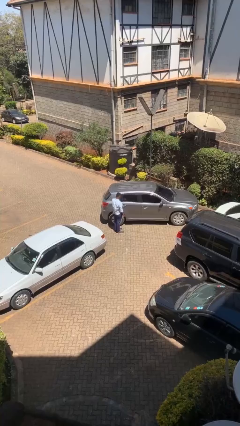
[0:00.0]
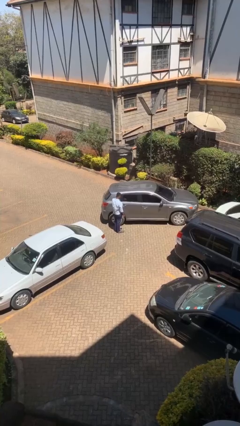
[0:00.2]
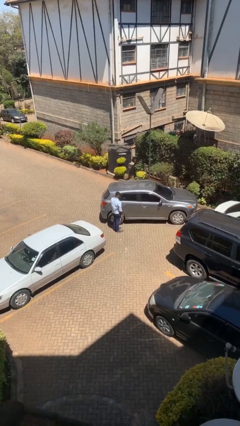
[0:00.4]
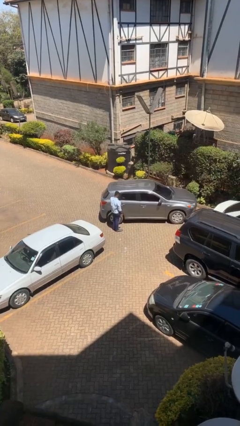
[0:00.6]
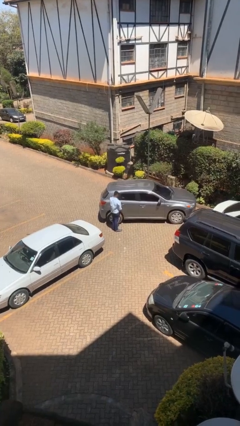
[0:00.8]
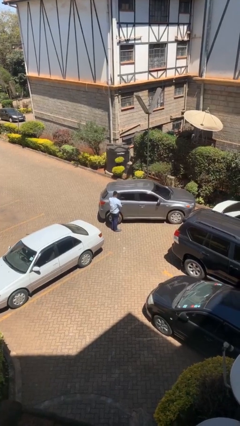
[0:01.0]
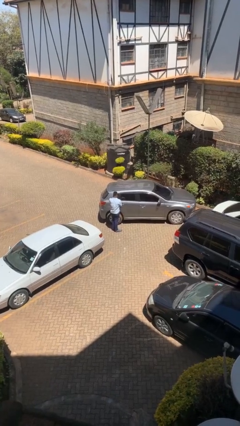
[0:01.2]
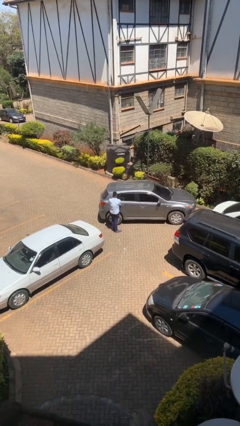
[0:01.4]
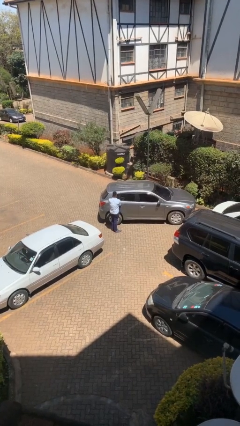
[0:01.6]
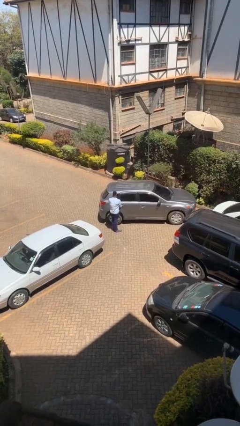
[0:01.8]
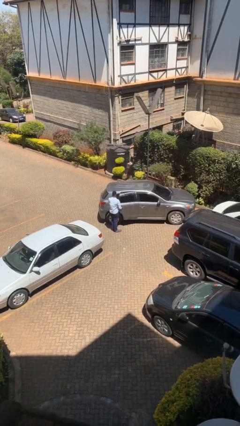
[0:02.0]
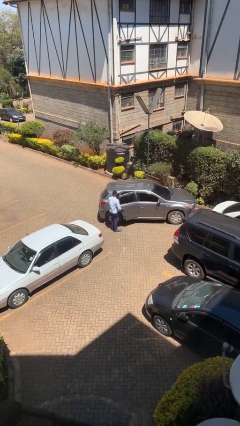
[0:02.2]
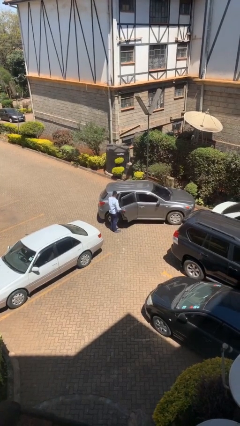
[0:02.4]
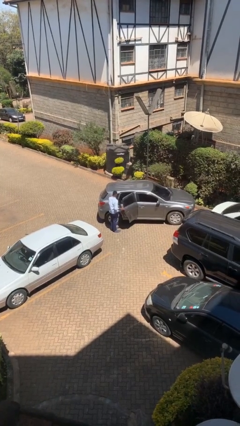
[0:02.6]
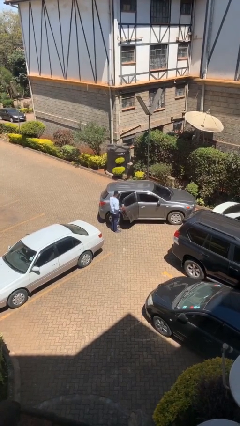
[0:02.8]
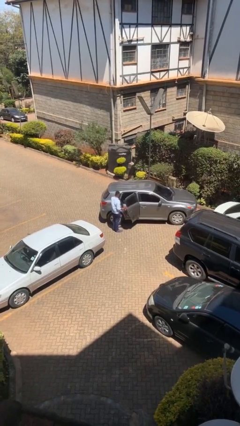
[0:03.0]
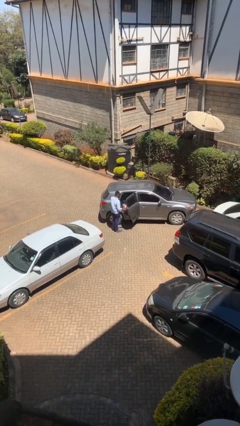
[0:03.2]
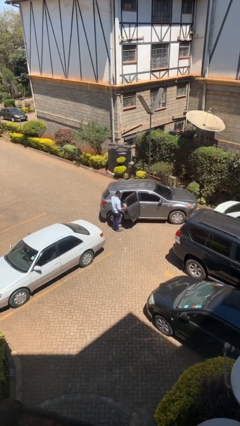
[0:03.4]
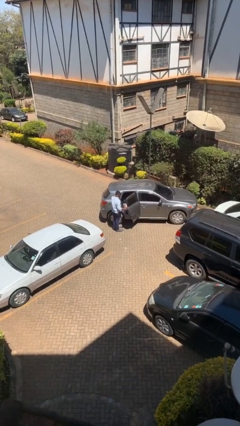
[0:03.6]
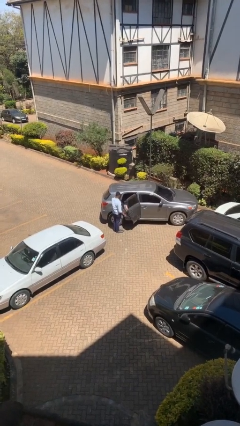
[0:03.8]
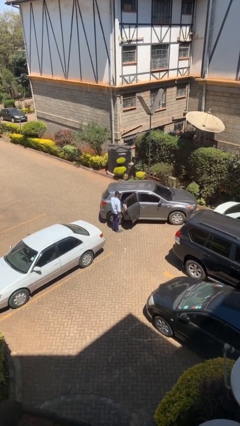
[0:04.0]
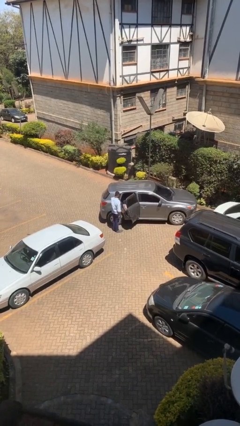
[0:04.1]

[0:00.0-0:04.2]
person opens car door

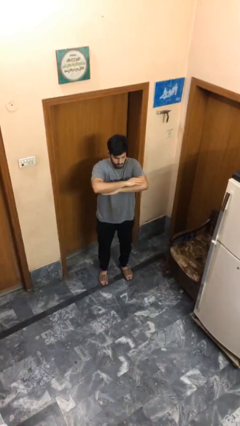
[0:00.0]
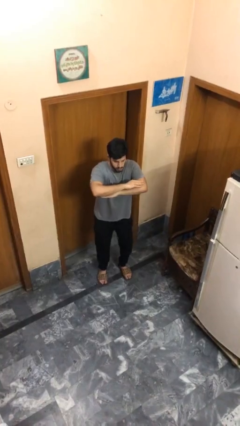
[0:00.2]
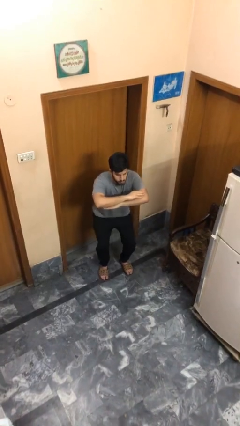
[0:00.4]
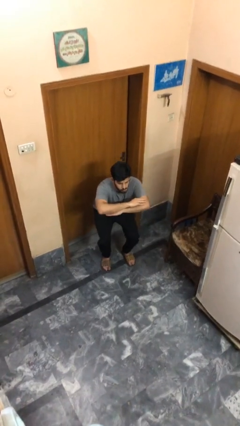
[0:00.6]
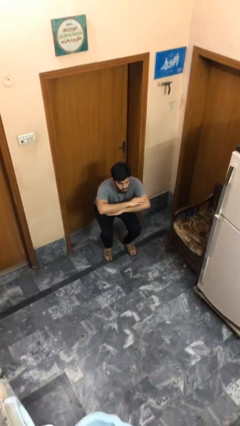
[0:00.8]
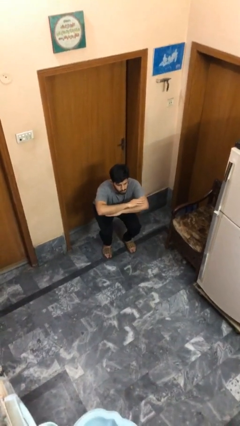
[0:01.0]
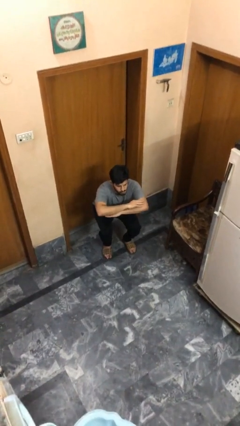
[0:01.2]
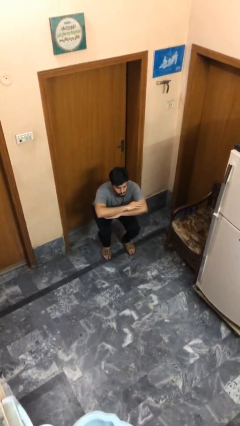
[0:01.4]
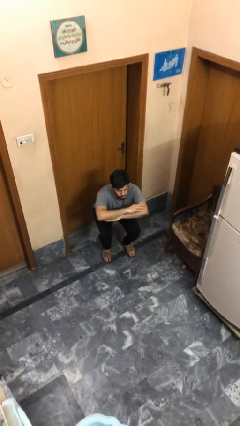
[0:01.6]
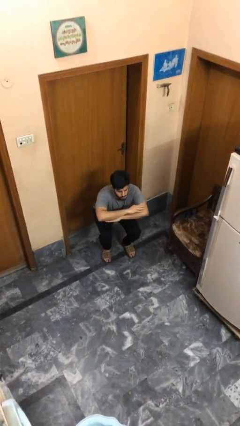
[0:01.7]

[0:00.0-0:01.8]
person squats

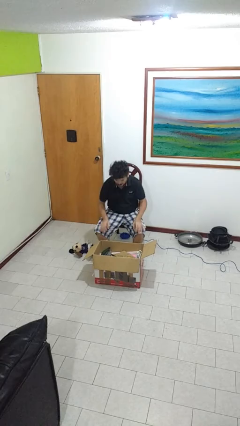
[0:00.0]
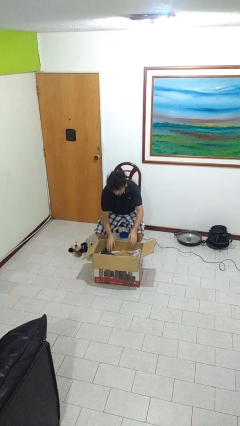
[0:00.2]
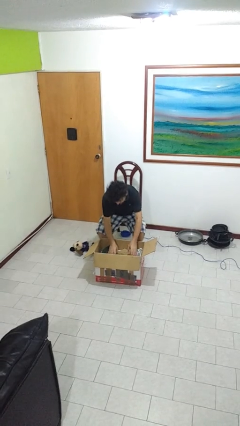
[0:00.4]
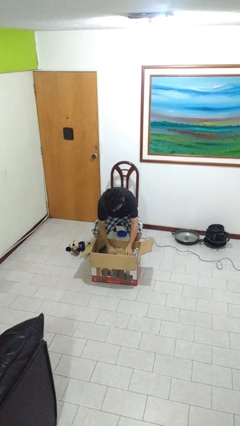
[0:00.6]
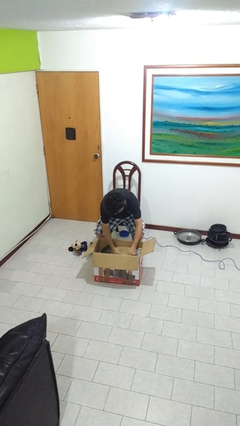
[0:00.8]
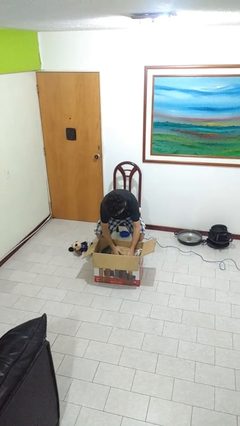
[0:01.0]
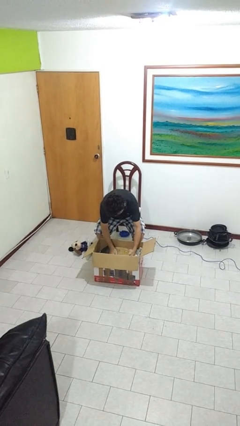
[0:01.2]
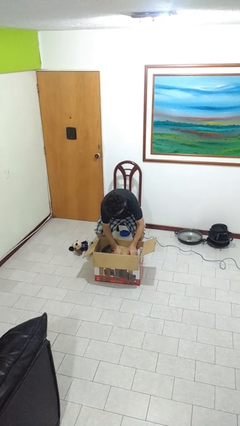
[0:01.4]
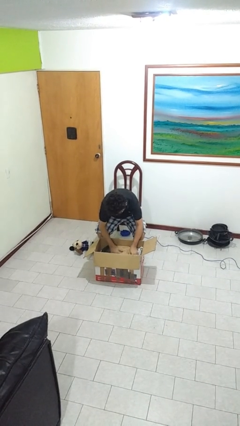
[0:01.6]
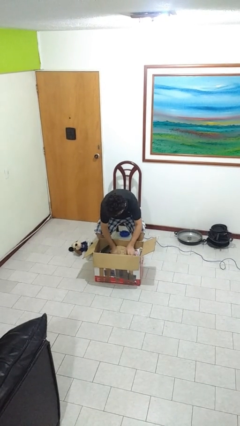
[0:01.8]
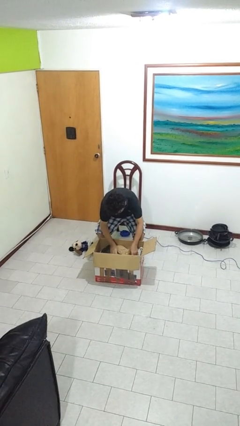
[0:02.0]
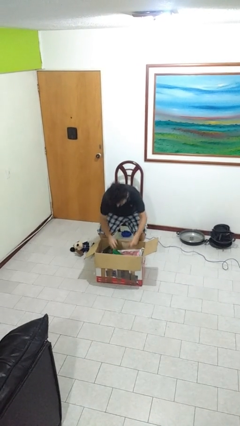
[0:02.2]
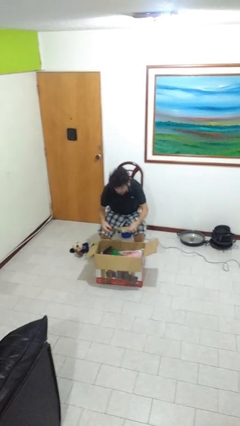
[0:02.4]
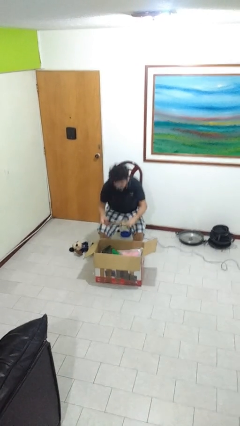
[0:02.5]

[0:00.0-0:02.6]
person searches in box

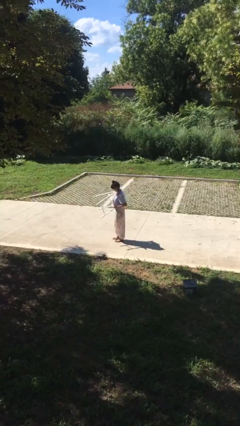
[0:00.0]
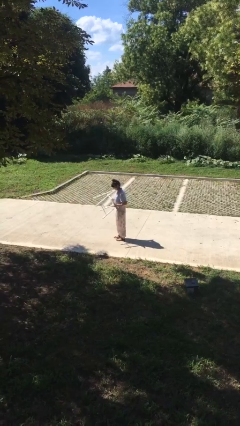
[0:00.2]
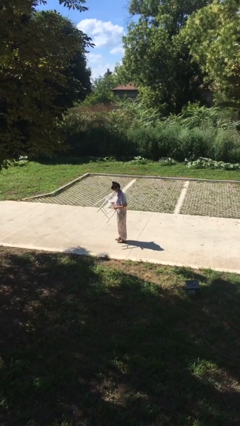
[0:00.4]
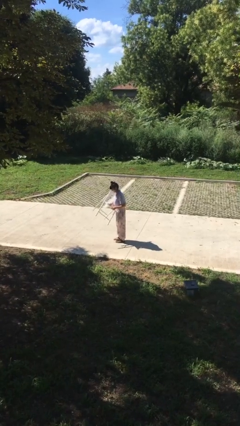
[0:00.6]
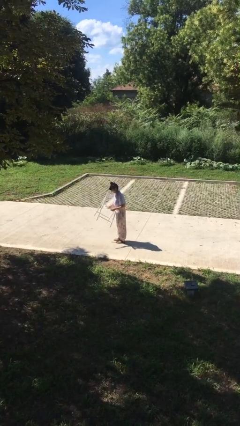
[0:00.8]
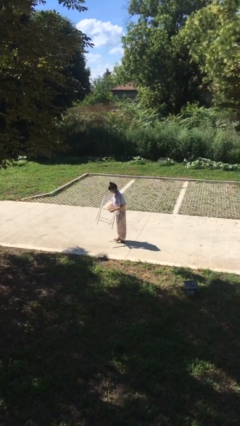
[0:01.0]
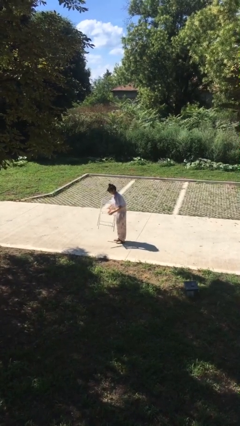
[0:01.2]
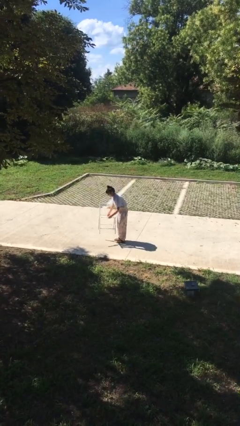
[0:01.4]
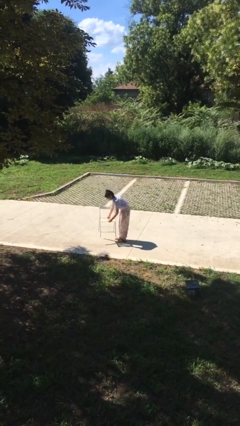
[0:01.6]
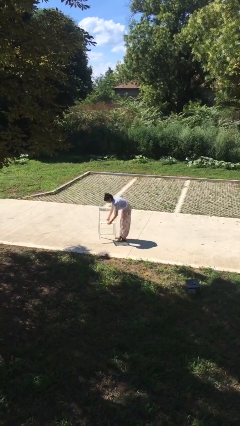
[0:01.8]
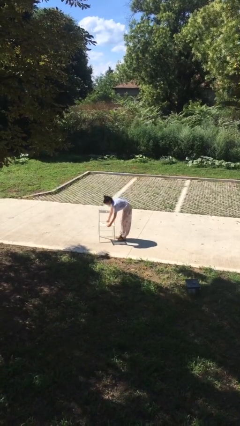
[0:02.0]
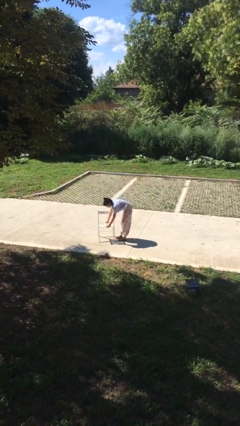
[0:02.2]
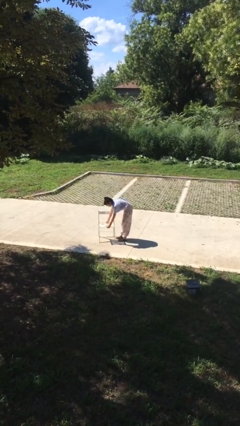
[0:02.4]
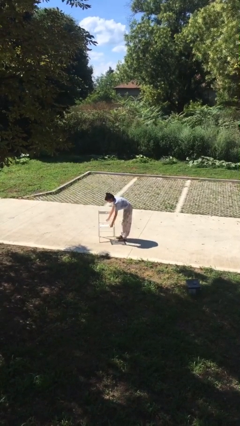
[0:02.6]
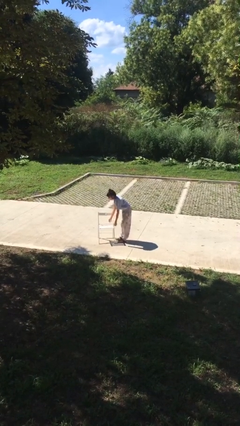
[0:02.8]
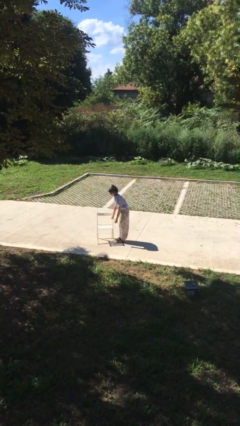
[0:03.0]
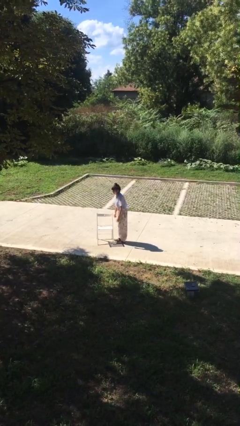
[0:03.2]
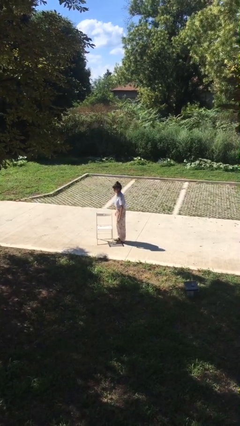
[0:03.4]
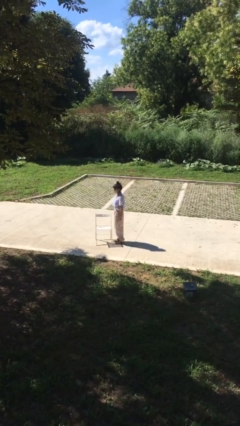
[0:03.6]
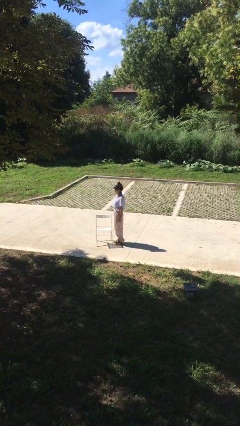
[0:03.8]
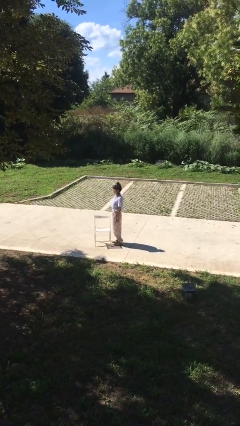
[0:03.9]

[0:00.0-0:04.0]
person puts down object on floor

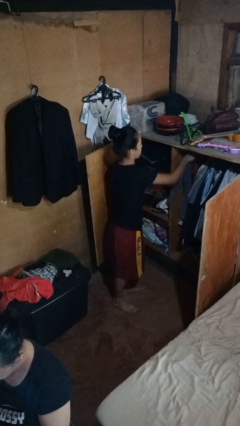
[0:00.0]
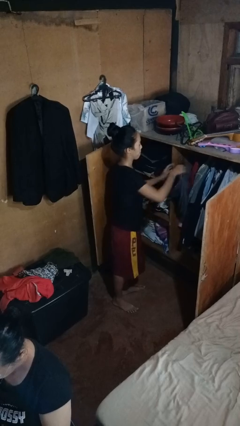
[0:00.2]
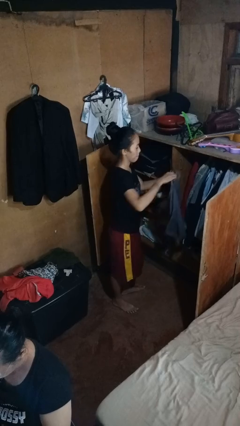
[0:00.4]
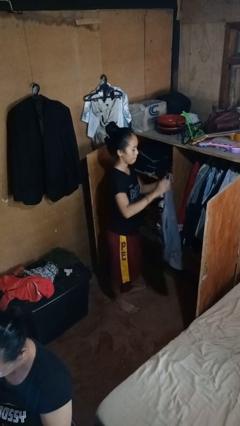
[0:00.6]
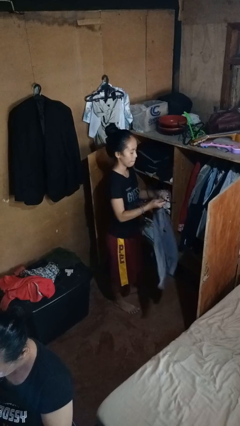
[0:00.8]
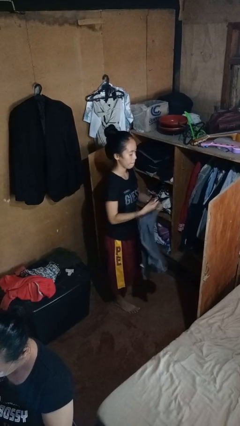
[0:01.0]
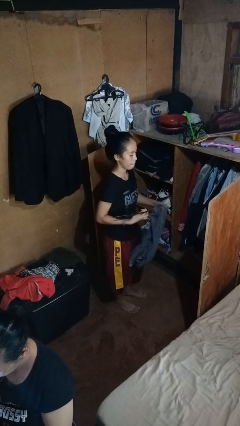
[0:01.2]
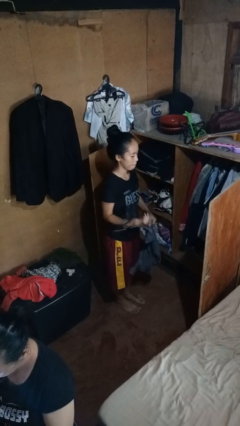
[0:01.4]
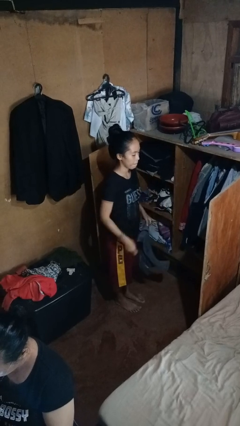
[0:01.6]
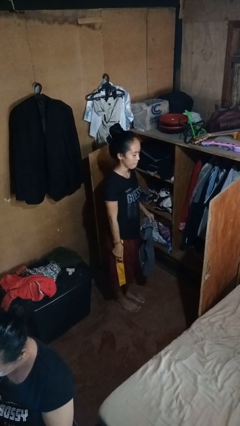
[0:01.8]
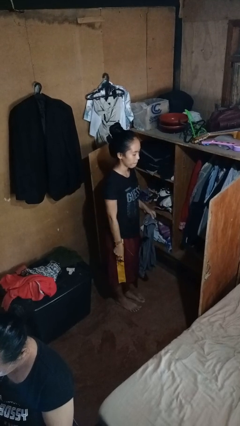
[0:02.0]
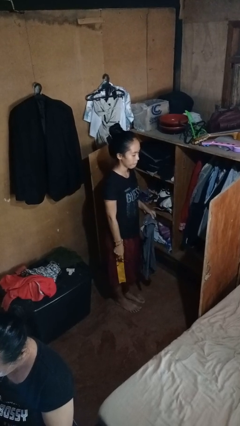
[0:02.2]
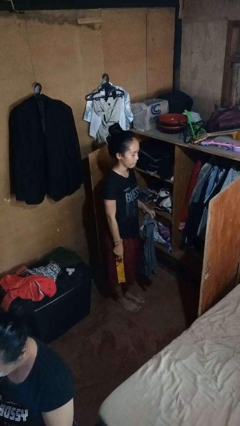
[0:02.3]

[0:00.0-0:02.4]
person takes clothes from closet

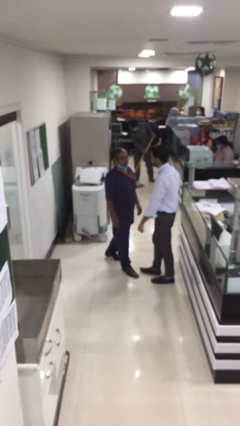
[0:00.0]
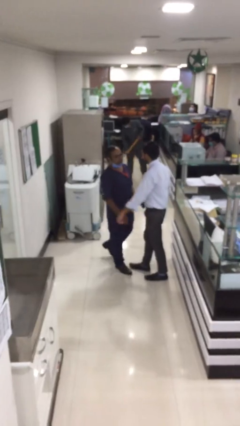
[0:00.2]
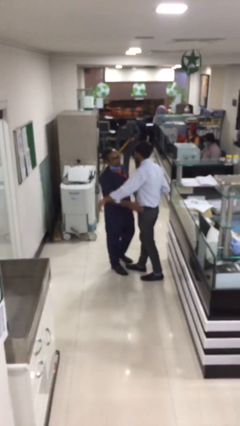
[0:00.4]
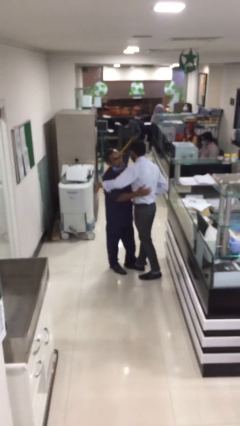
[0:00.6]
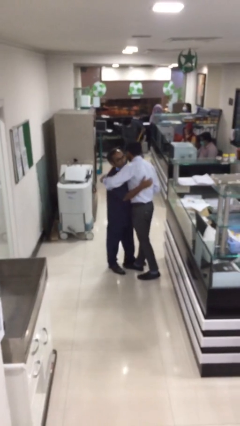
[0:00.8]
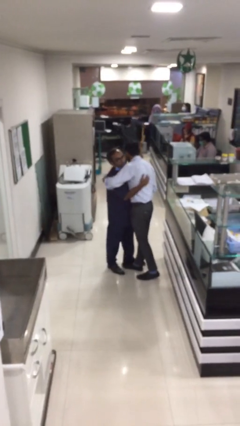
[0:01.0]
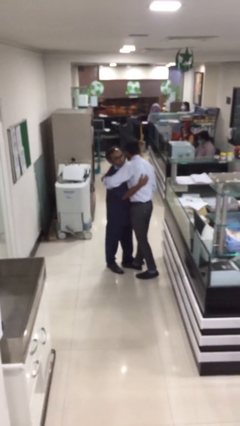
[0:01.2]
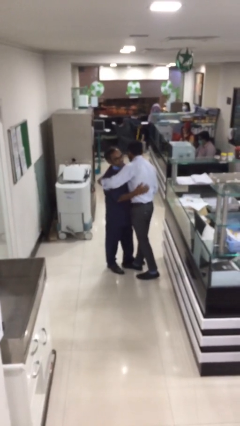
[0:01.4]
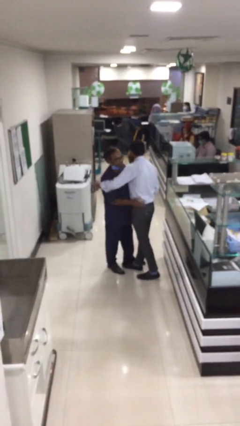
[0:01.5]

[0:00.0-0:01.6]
person embraces person

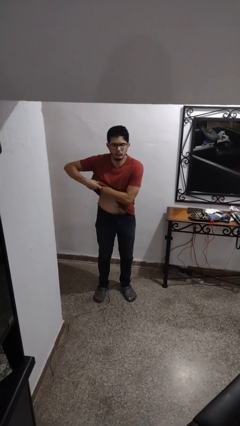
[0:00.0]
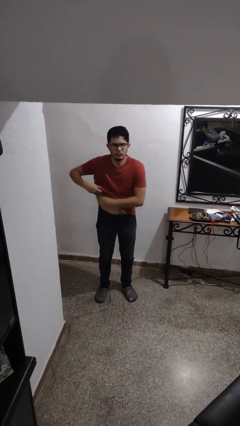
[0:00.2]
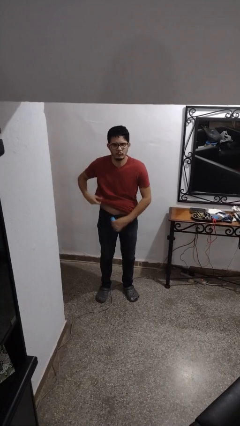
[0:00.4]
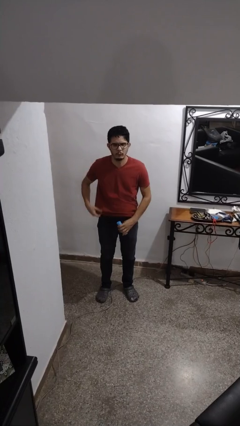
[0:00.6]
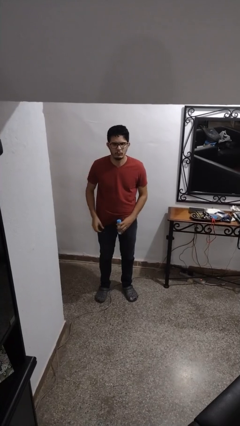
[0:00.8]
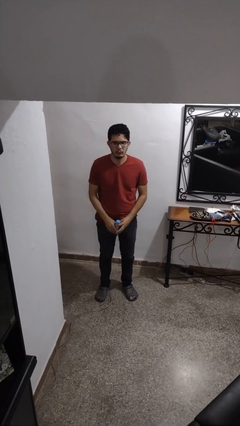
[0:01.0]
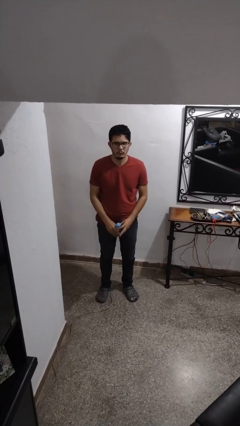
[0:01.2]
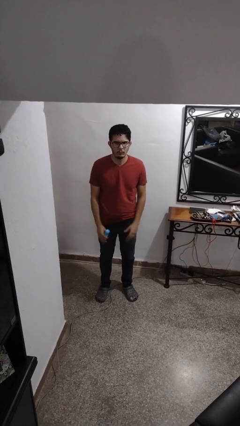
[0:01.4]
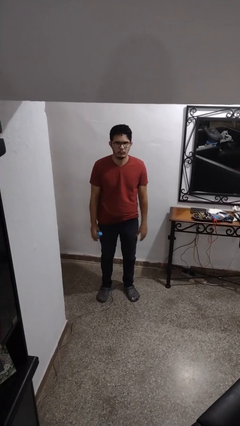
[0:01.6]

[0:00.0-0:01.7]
person applies deodorant
